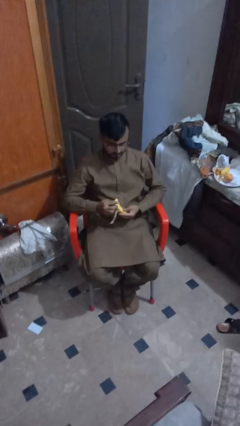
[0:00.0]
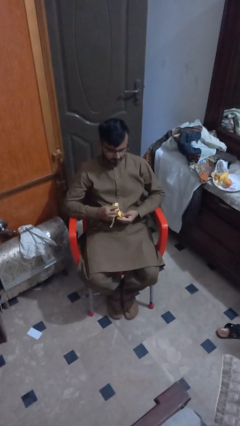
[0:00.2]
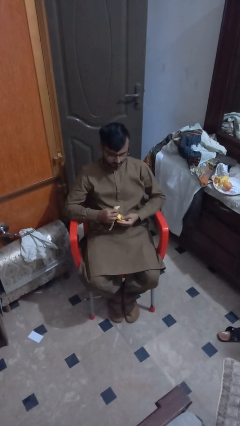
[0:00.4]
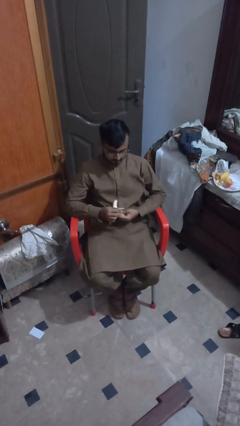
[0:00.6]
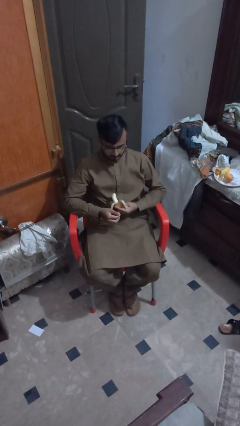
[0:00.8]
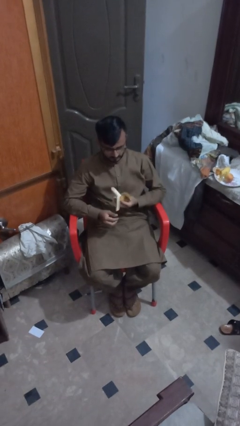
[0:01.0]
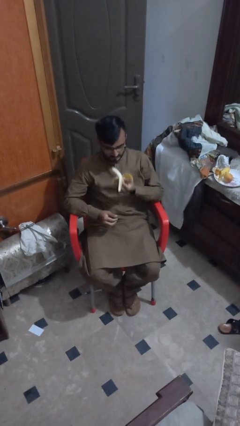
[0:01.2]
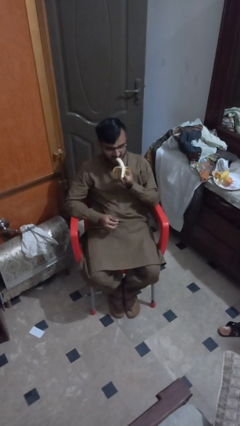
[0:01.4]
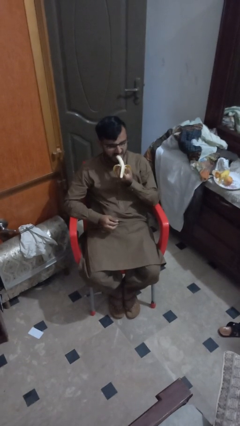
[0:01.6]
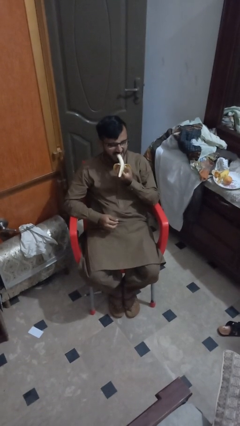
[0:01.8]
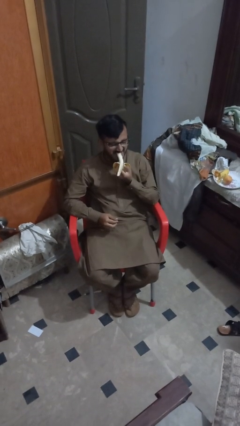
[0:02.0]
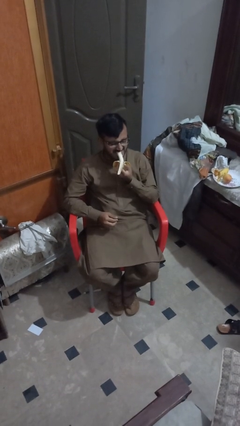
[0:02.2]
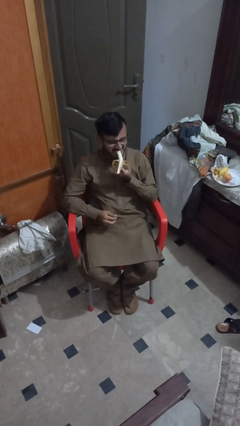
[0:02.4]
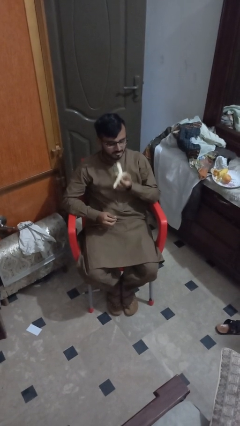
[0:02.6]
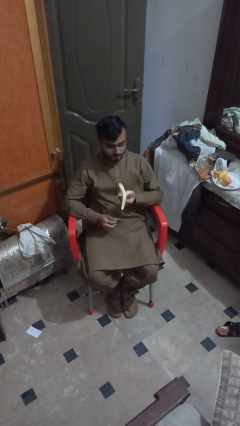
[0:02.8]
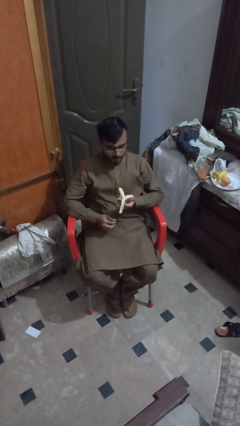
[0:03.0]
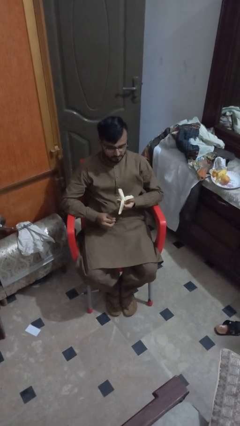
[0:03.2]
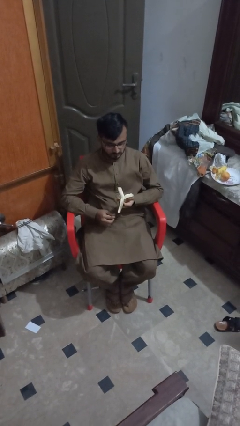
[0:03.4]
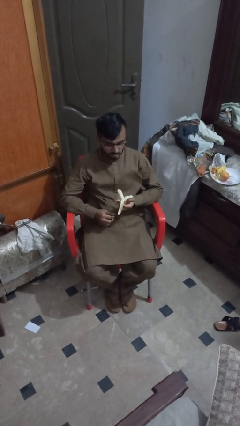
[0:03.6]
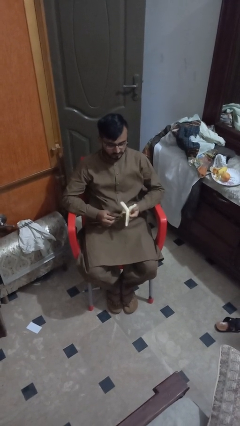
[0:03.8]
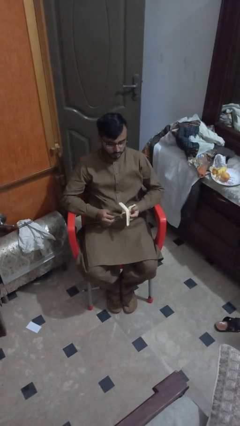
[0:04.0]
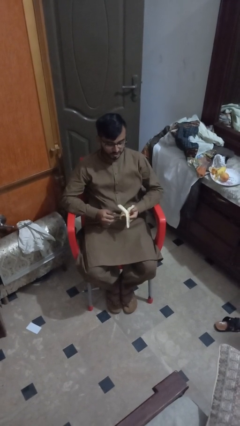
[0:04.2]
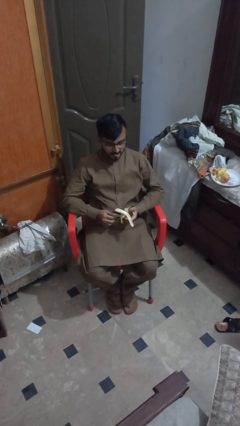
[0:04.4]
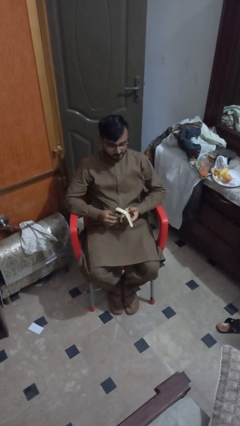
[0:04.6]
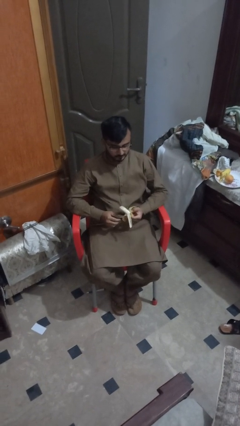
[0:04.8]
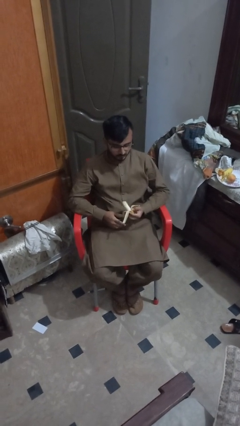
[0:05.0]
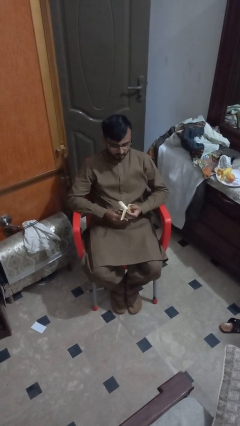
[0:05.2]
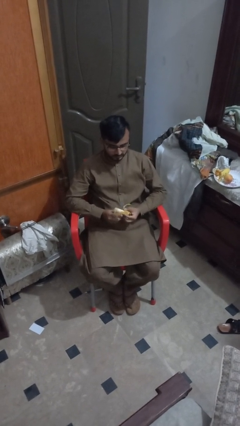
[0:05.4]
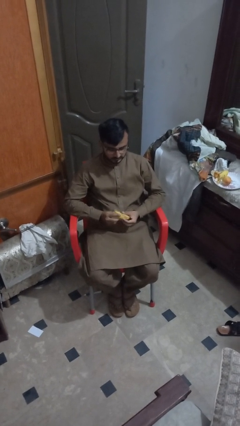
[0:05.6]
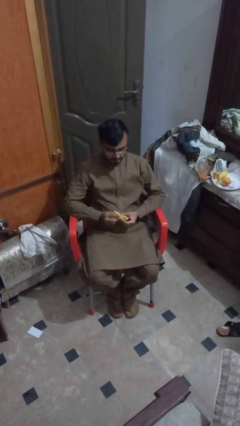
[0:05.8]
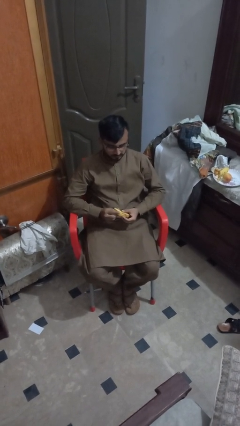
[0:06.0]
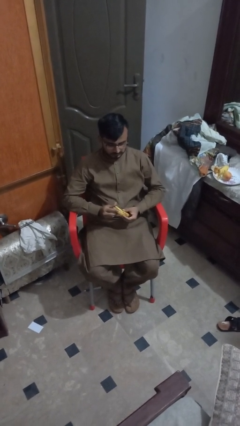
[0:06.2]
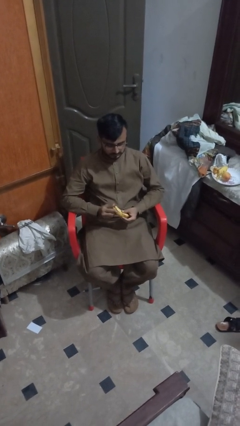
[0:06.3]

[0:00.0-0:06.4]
person eats banana

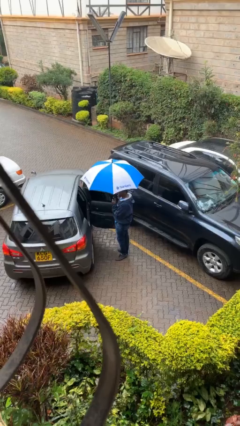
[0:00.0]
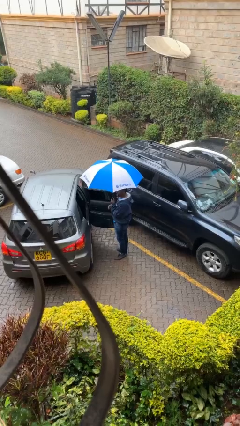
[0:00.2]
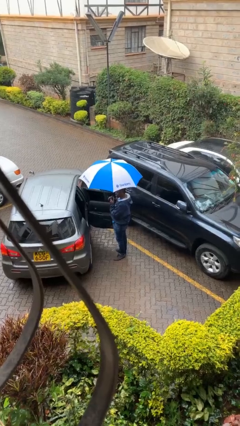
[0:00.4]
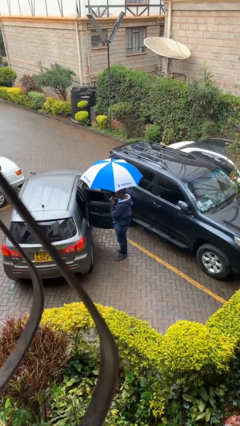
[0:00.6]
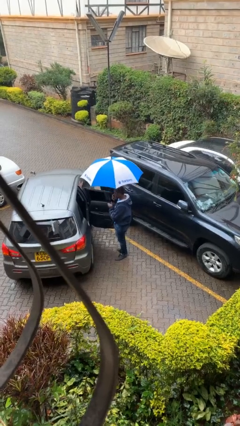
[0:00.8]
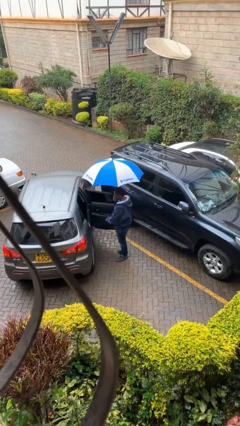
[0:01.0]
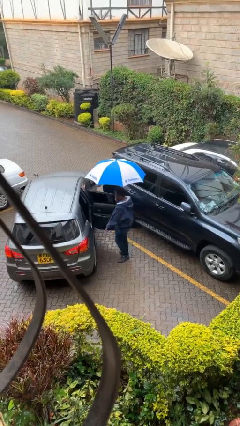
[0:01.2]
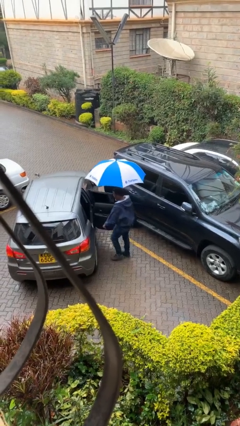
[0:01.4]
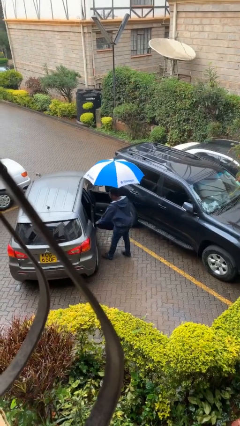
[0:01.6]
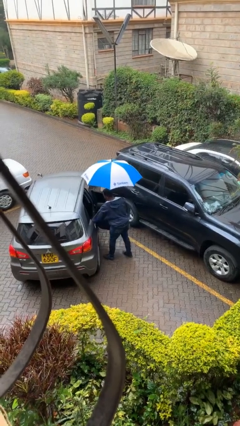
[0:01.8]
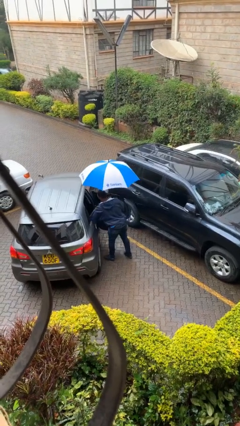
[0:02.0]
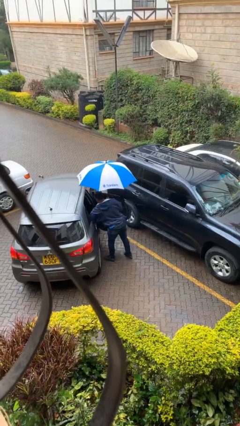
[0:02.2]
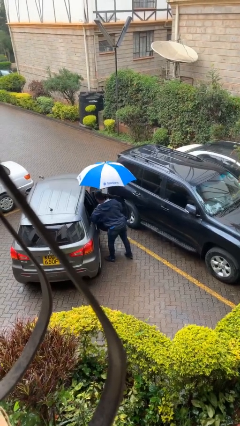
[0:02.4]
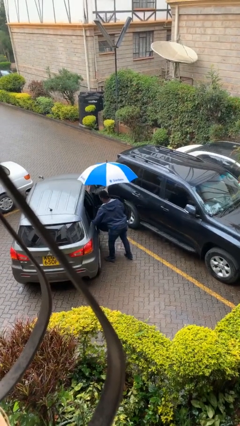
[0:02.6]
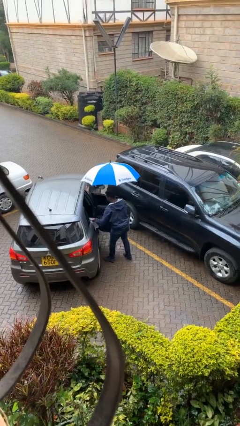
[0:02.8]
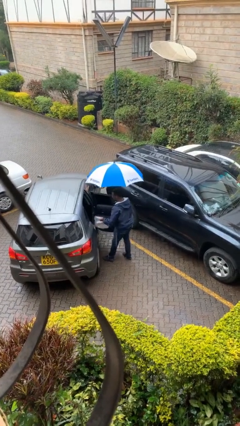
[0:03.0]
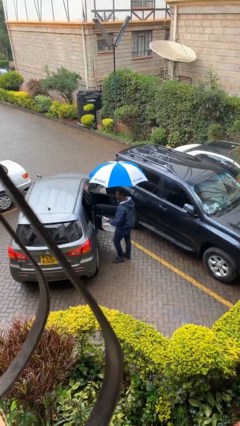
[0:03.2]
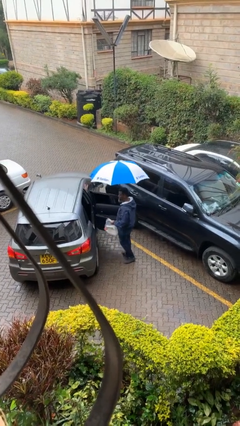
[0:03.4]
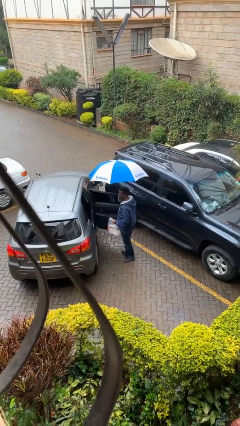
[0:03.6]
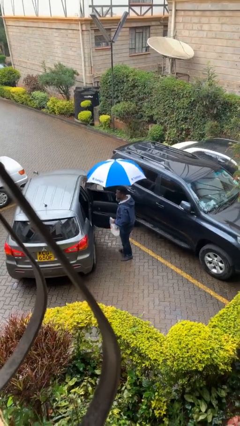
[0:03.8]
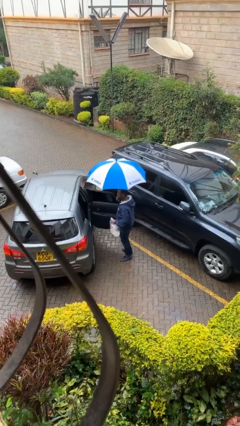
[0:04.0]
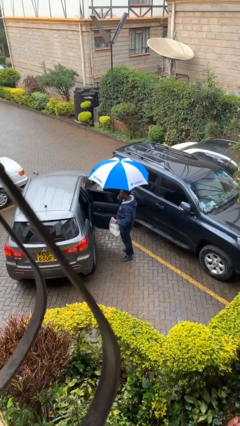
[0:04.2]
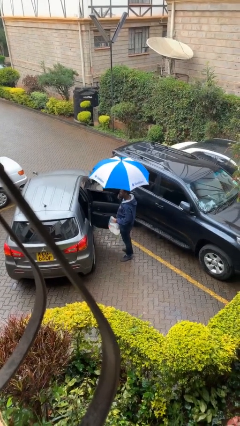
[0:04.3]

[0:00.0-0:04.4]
person unloads car

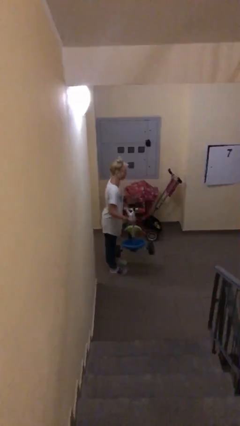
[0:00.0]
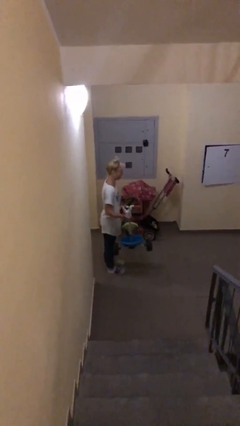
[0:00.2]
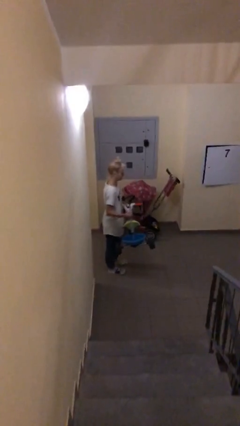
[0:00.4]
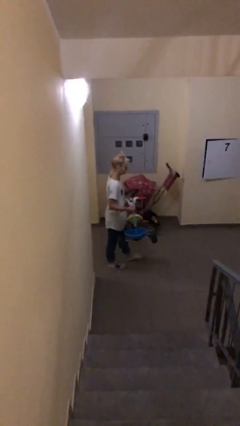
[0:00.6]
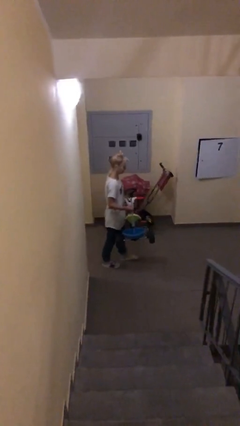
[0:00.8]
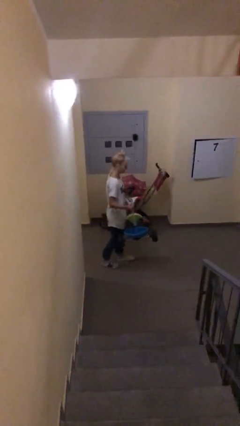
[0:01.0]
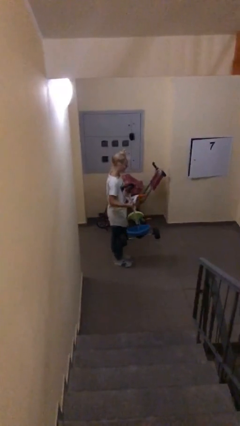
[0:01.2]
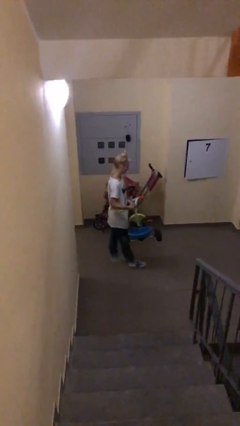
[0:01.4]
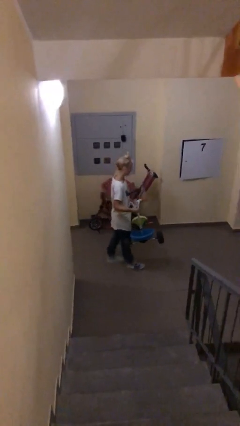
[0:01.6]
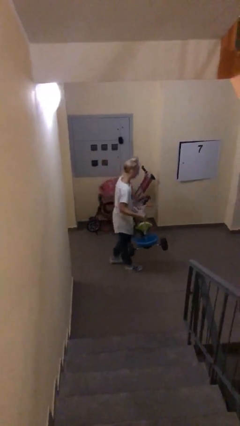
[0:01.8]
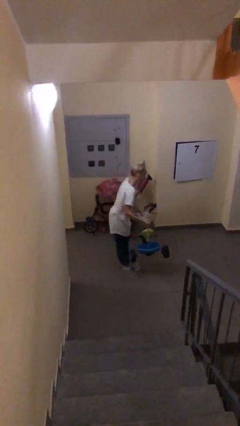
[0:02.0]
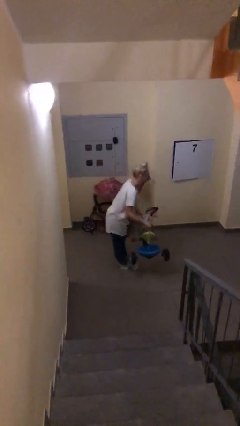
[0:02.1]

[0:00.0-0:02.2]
person carries heavy object

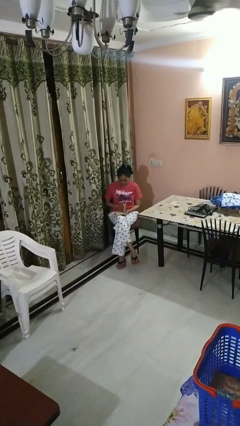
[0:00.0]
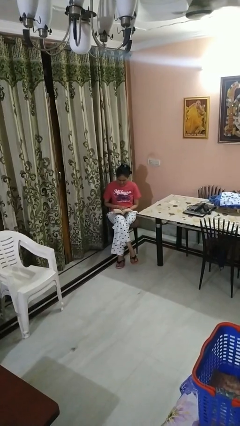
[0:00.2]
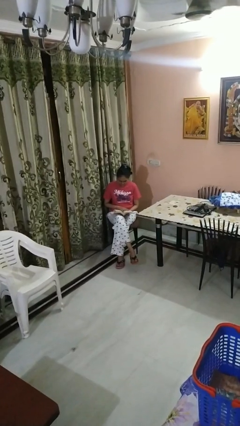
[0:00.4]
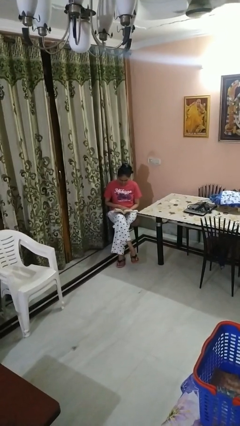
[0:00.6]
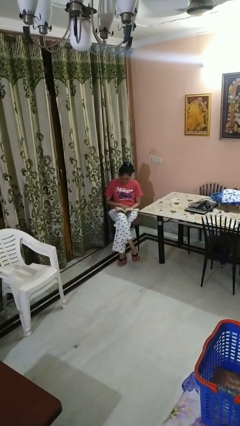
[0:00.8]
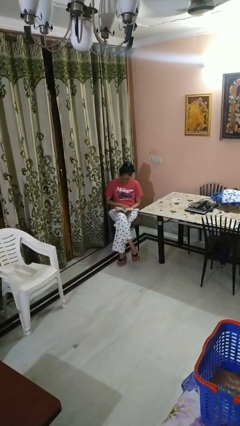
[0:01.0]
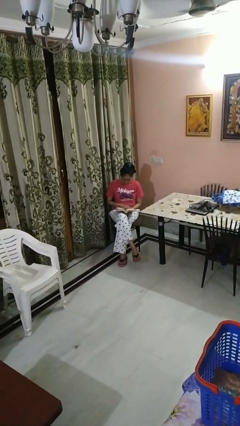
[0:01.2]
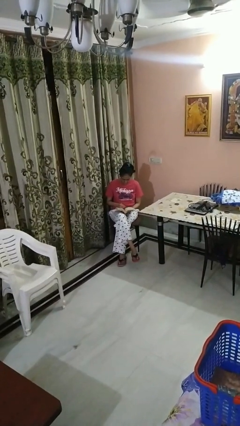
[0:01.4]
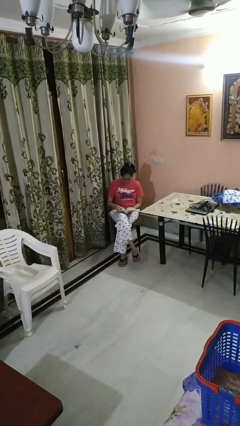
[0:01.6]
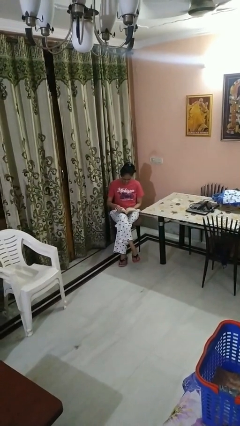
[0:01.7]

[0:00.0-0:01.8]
person reads book

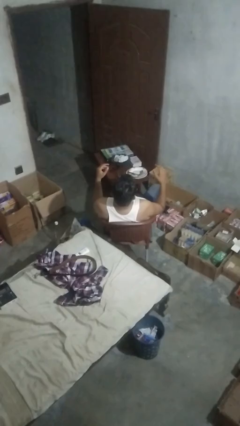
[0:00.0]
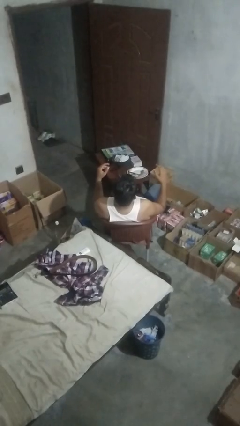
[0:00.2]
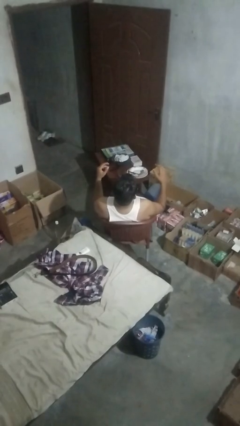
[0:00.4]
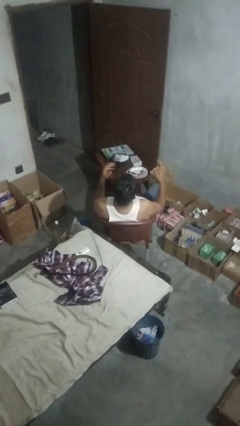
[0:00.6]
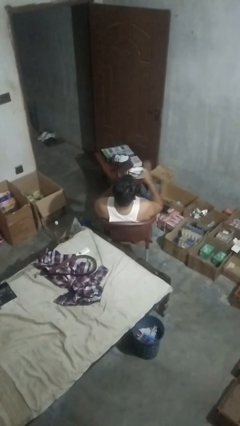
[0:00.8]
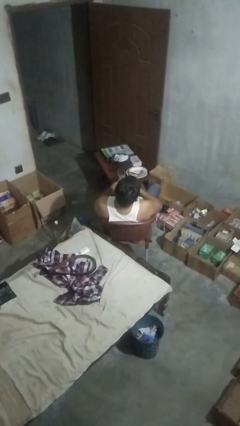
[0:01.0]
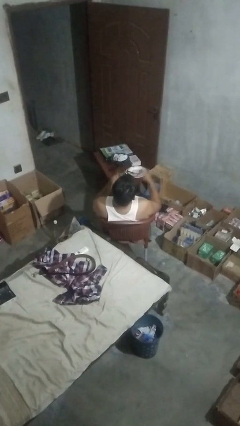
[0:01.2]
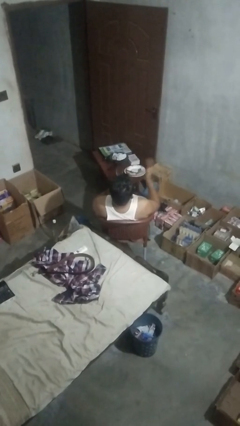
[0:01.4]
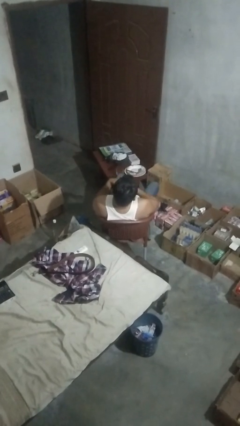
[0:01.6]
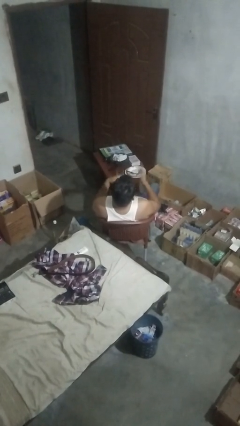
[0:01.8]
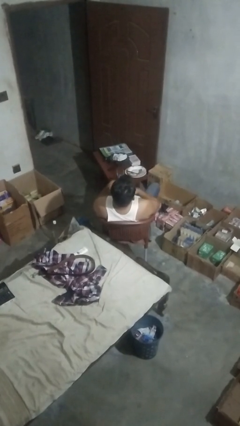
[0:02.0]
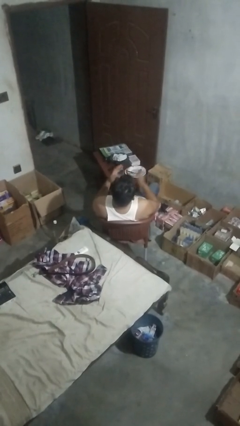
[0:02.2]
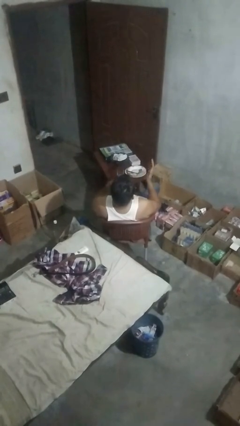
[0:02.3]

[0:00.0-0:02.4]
person drums on chest

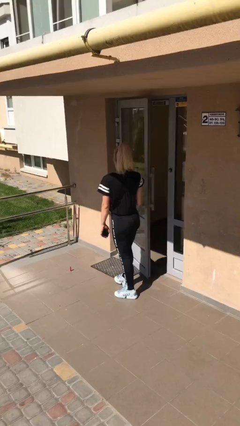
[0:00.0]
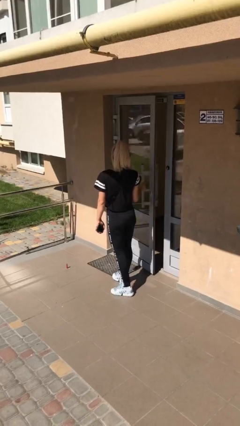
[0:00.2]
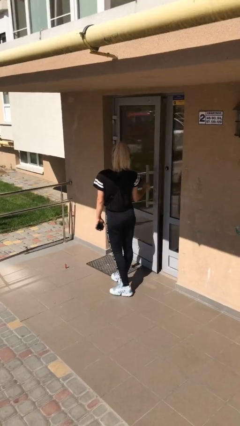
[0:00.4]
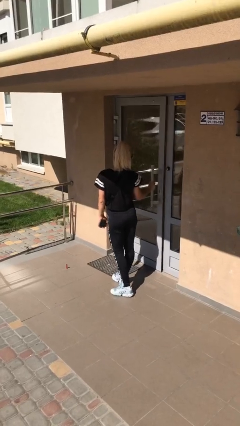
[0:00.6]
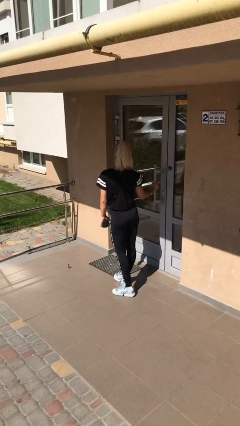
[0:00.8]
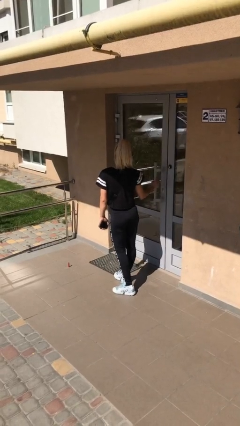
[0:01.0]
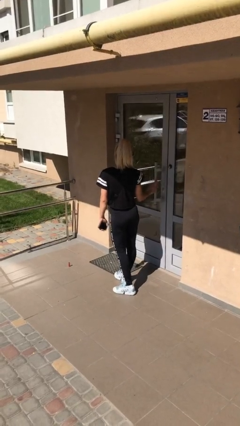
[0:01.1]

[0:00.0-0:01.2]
person closes facility door
